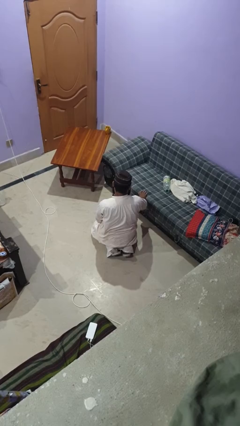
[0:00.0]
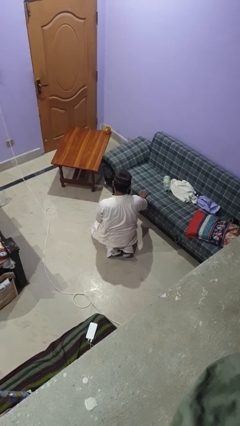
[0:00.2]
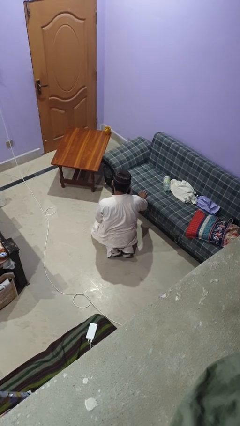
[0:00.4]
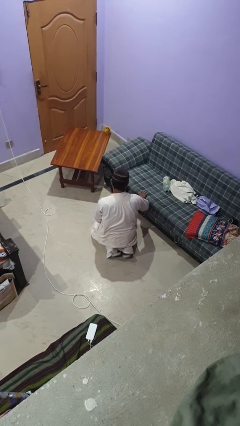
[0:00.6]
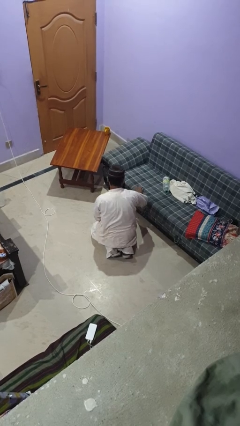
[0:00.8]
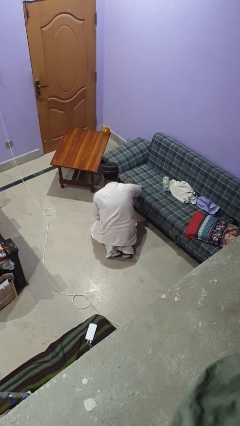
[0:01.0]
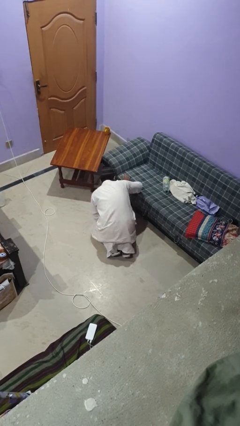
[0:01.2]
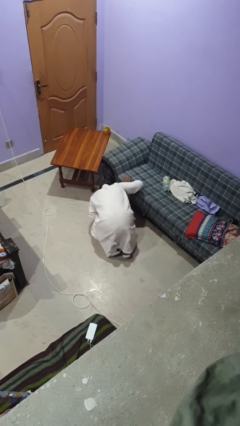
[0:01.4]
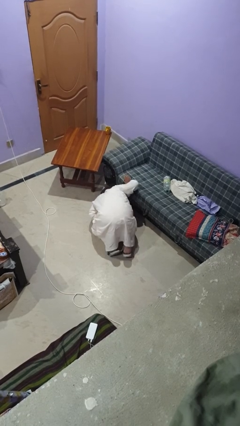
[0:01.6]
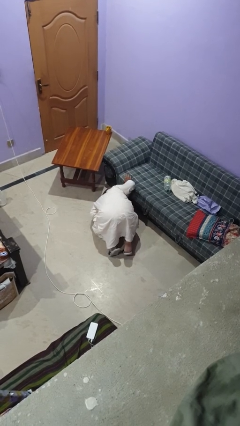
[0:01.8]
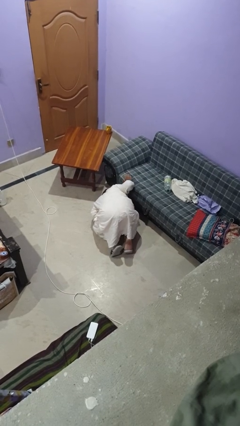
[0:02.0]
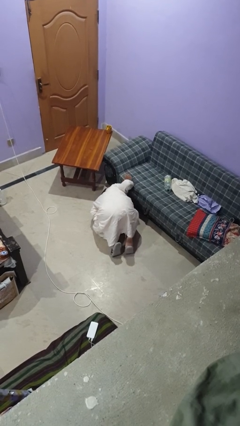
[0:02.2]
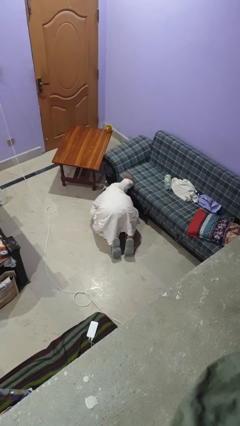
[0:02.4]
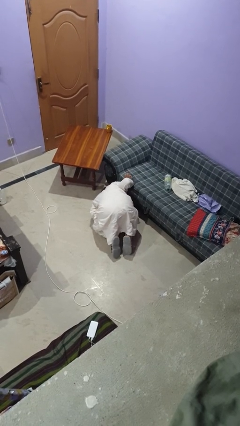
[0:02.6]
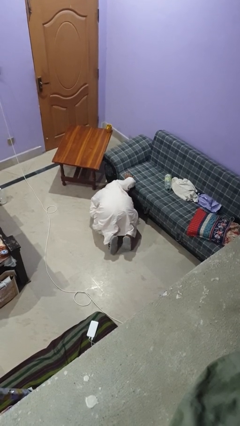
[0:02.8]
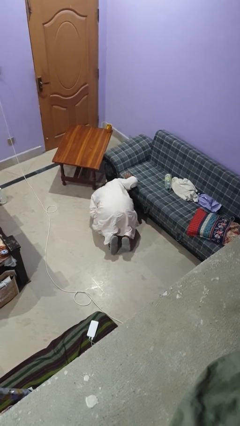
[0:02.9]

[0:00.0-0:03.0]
person searches under couch

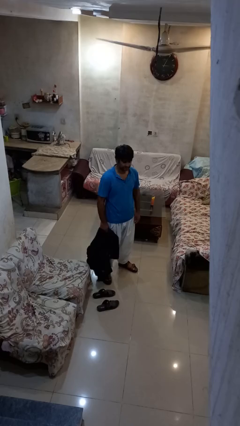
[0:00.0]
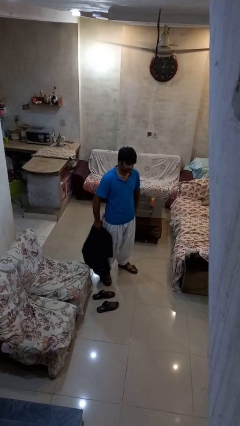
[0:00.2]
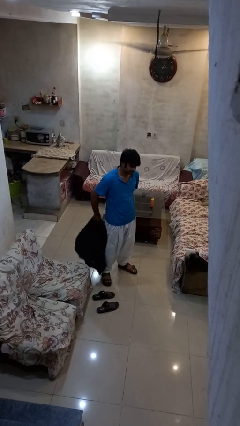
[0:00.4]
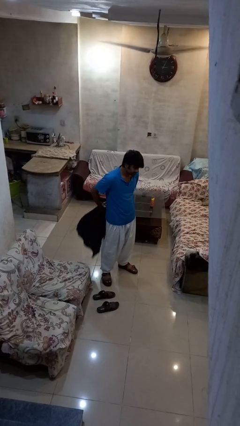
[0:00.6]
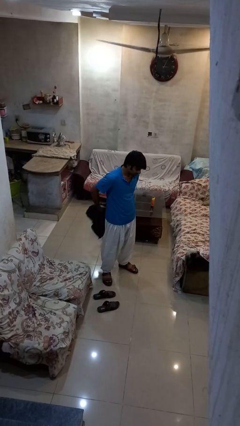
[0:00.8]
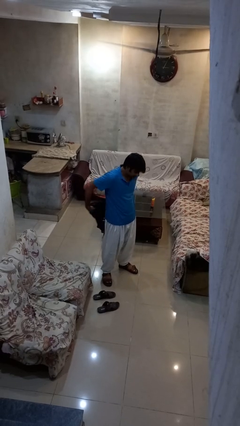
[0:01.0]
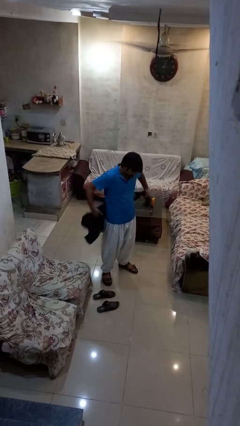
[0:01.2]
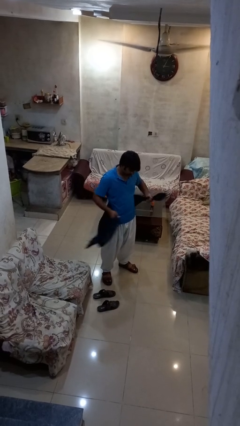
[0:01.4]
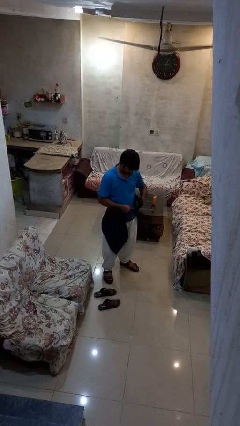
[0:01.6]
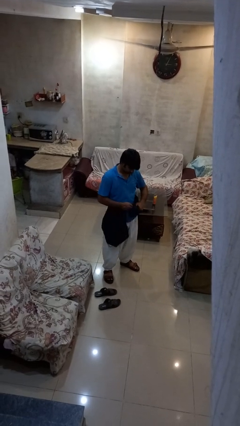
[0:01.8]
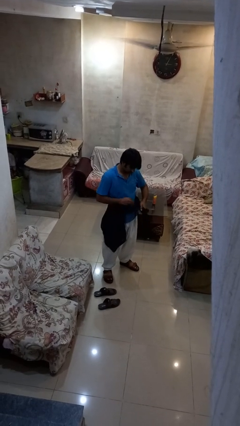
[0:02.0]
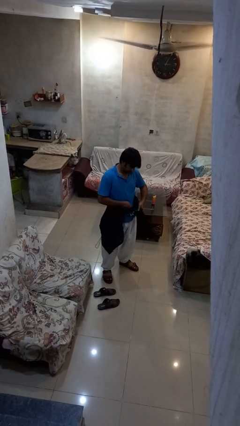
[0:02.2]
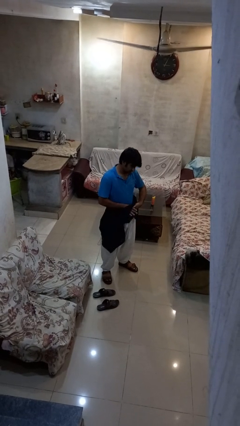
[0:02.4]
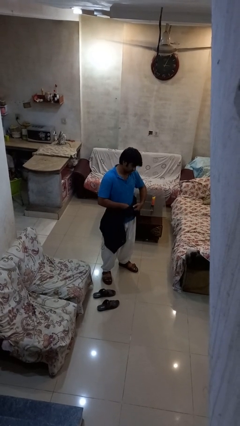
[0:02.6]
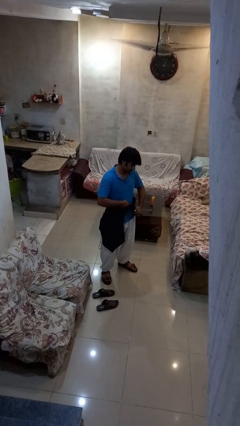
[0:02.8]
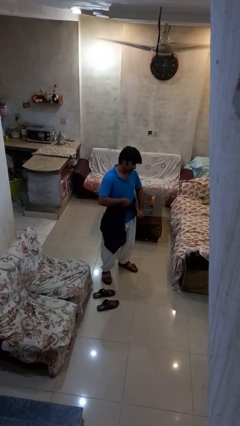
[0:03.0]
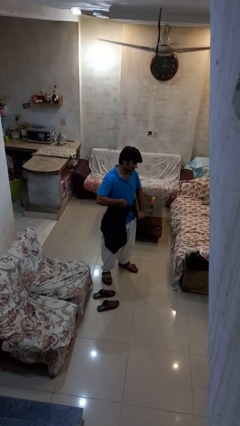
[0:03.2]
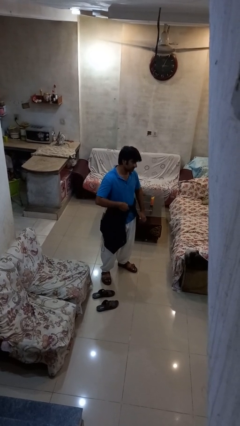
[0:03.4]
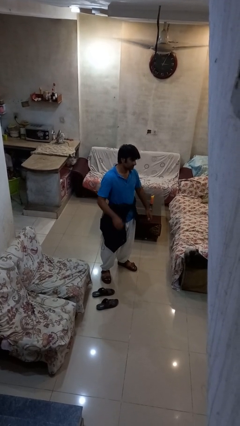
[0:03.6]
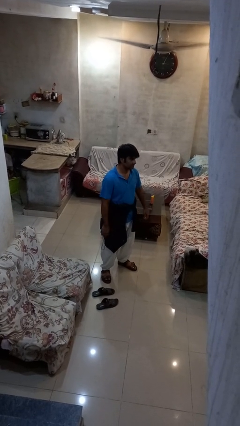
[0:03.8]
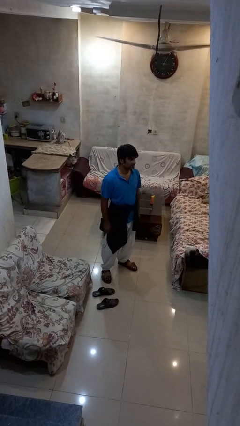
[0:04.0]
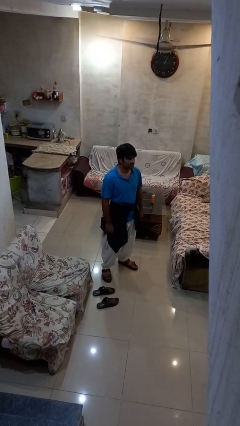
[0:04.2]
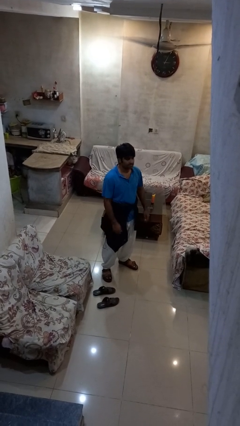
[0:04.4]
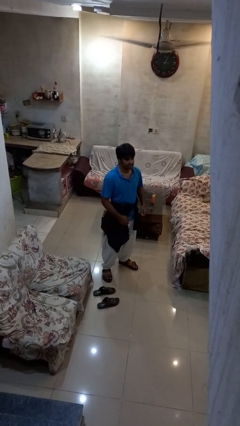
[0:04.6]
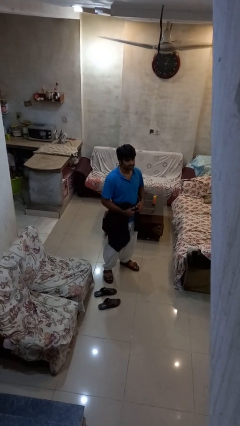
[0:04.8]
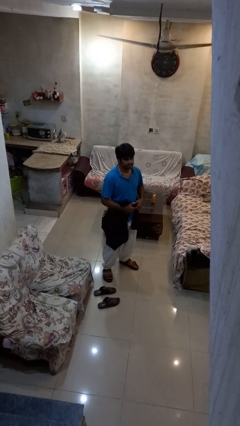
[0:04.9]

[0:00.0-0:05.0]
person ties jacket around waist

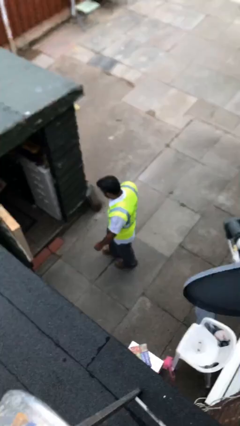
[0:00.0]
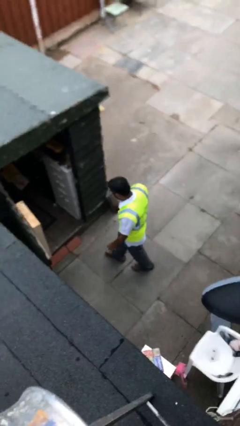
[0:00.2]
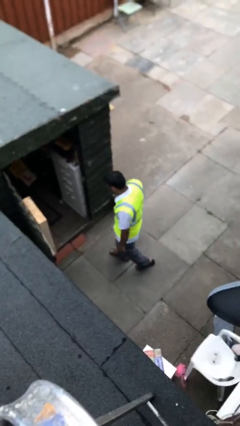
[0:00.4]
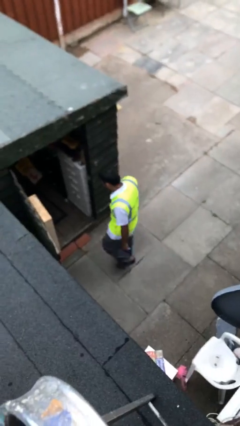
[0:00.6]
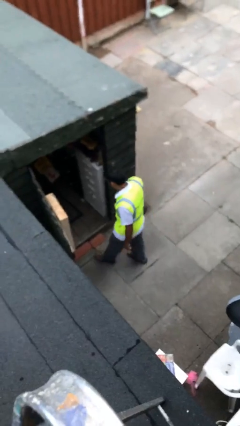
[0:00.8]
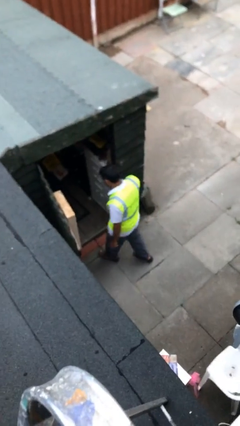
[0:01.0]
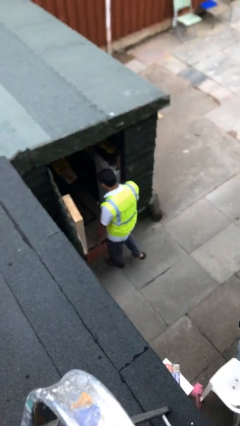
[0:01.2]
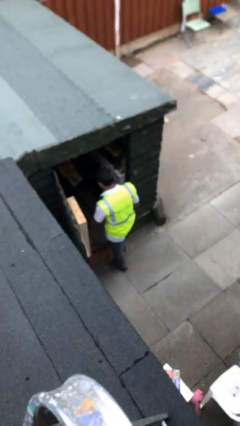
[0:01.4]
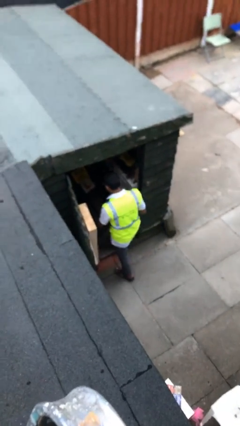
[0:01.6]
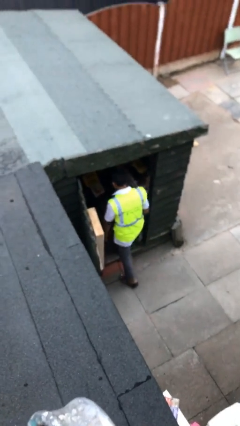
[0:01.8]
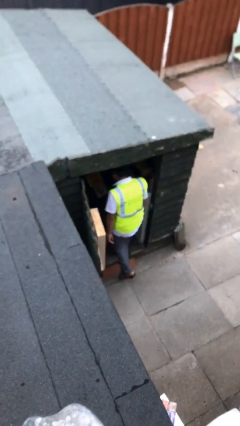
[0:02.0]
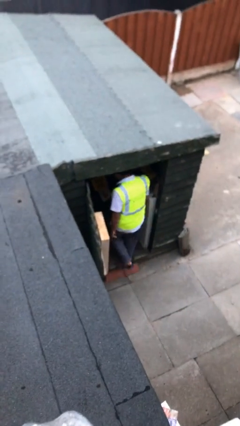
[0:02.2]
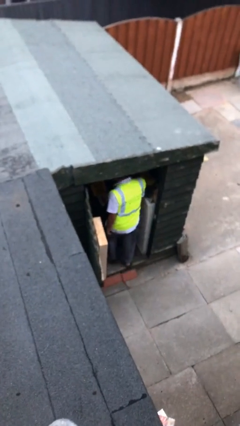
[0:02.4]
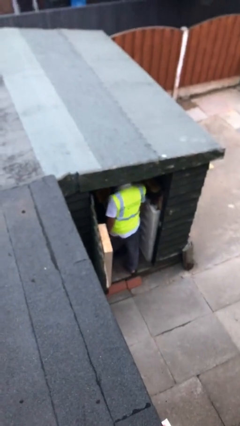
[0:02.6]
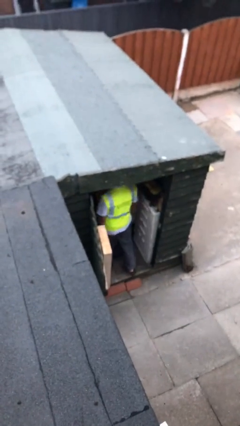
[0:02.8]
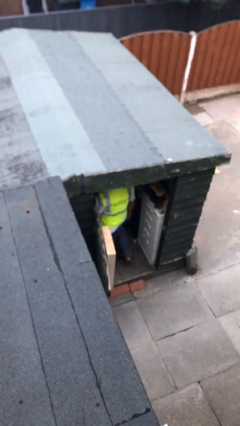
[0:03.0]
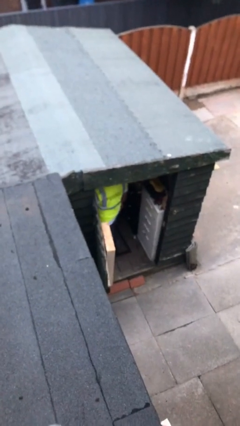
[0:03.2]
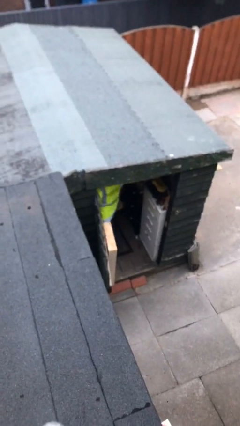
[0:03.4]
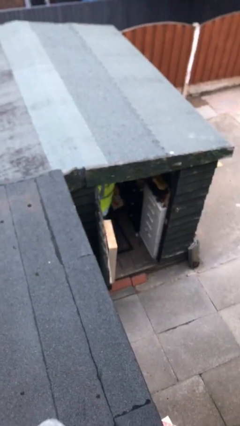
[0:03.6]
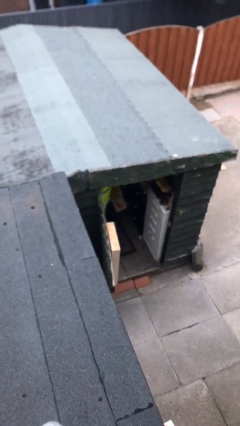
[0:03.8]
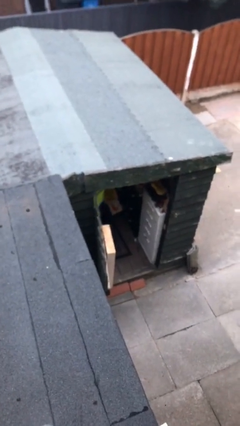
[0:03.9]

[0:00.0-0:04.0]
person exits scene through structure

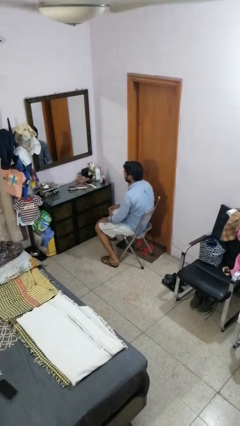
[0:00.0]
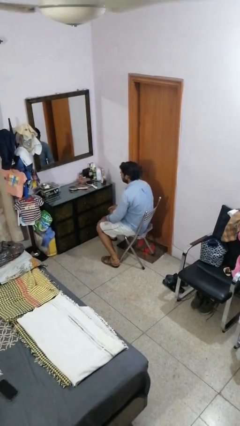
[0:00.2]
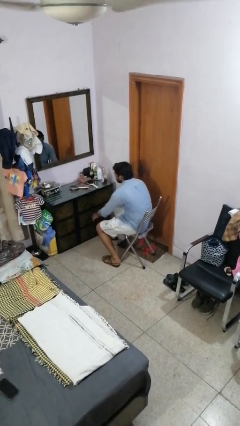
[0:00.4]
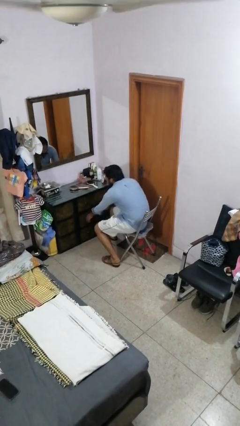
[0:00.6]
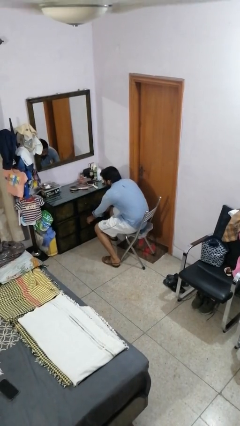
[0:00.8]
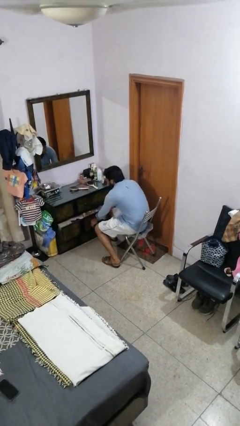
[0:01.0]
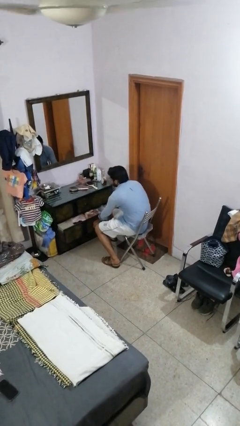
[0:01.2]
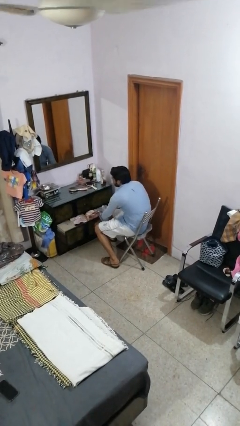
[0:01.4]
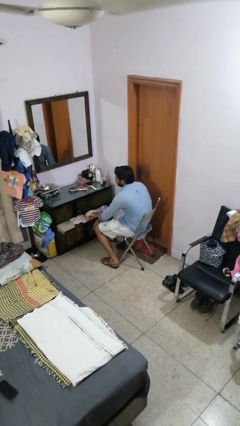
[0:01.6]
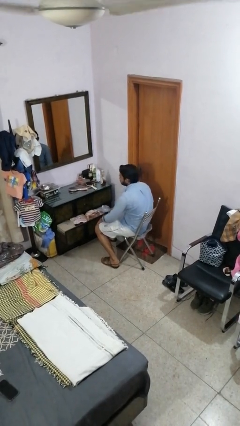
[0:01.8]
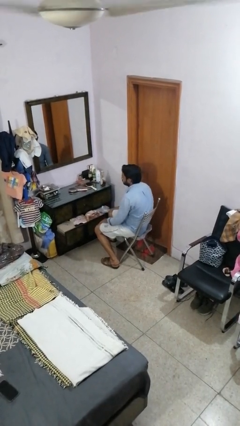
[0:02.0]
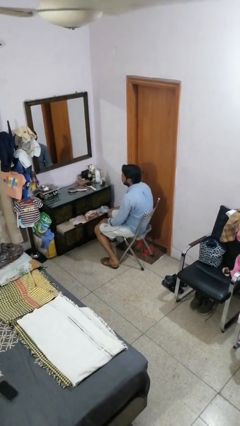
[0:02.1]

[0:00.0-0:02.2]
person opens dresser drawer

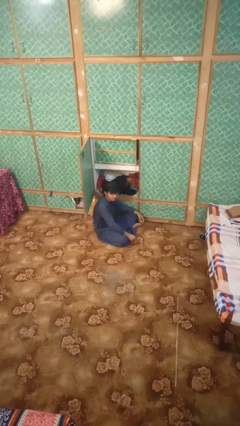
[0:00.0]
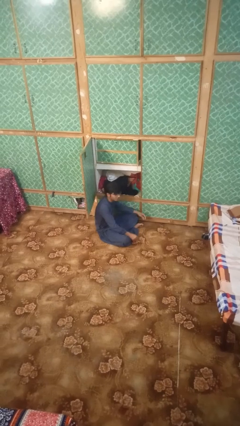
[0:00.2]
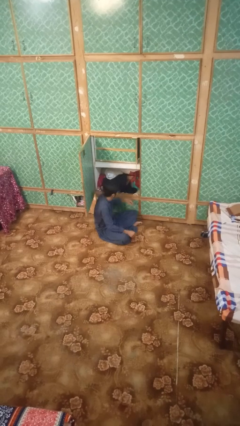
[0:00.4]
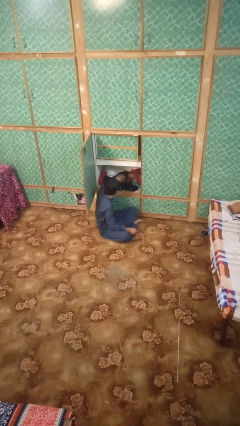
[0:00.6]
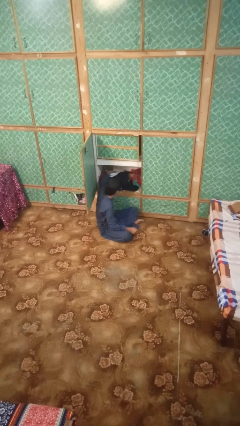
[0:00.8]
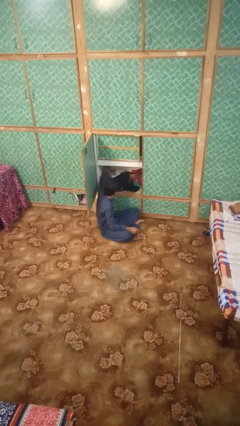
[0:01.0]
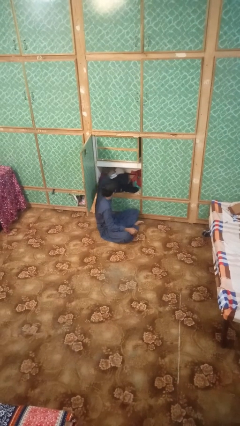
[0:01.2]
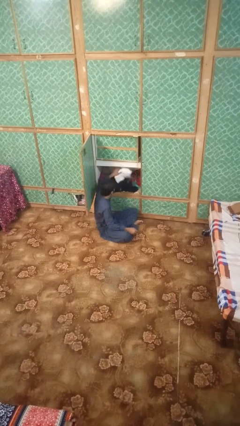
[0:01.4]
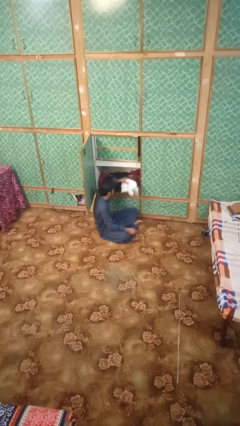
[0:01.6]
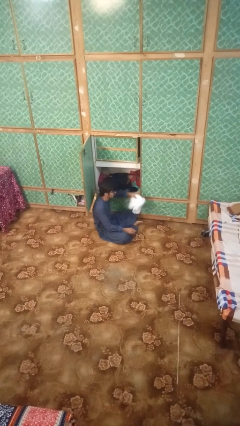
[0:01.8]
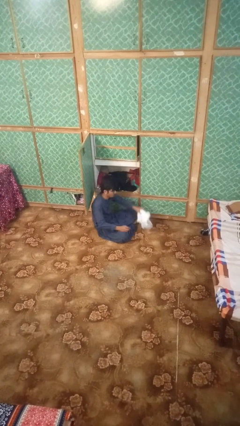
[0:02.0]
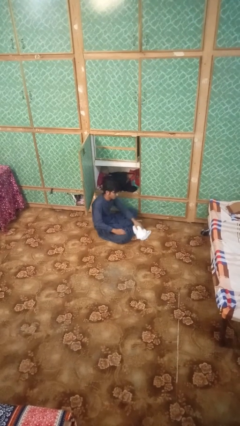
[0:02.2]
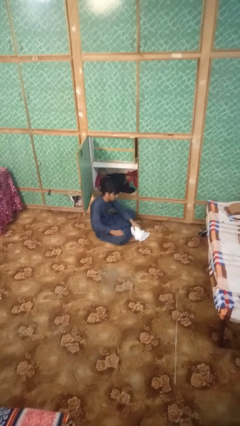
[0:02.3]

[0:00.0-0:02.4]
person takes clothes from dresser

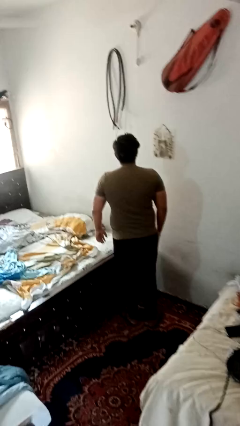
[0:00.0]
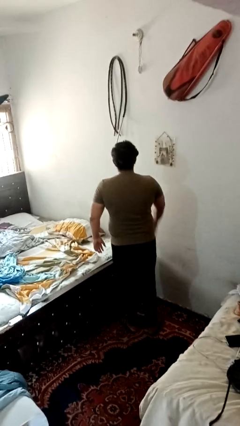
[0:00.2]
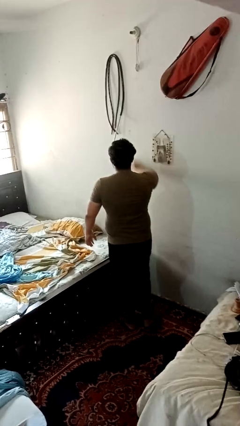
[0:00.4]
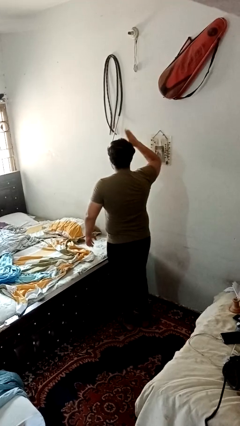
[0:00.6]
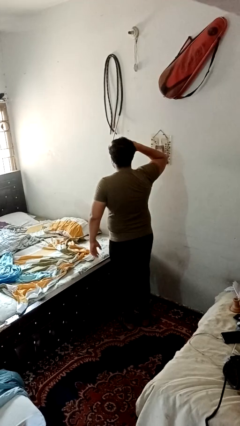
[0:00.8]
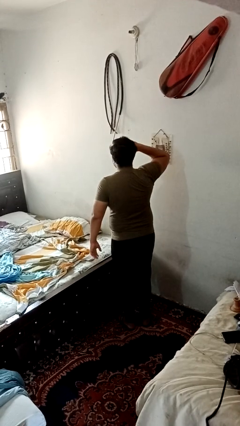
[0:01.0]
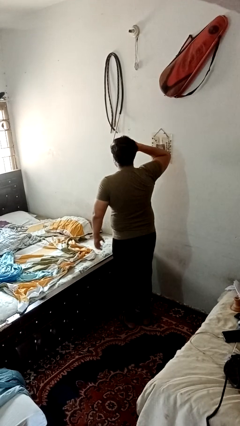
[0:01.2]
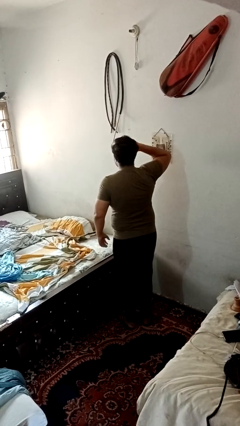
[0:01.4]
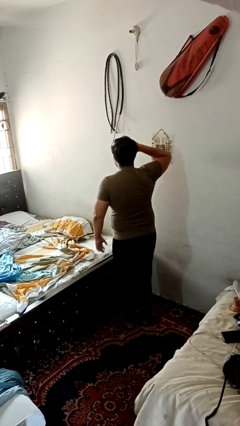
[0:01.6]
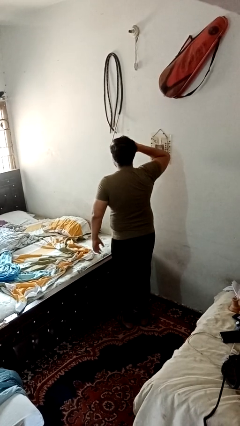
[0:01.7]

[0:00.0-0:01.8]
person salutes
